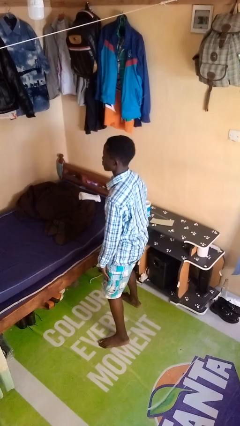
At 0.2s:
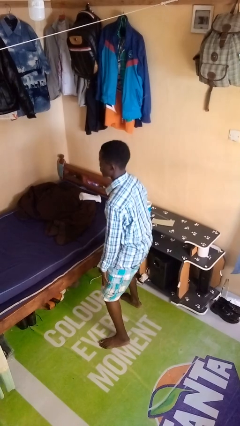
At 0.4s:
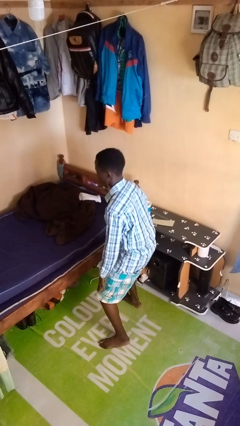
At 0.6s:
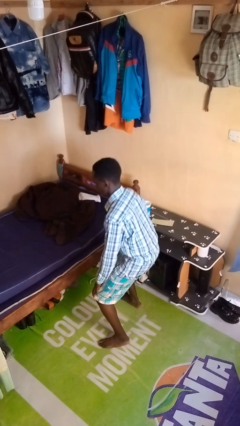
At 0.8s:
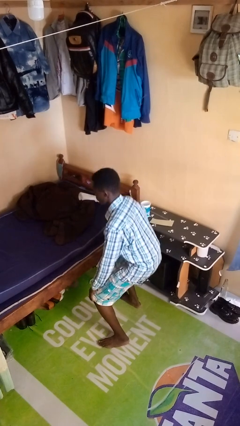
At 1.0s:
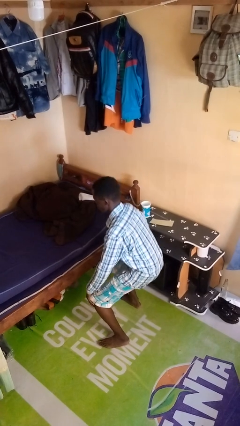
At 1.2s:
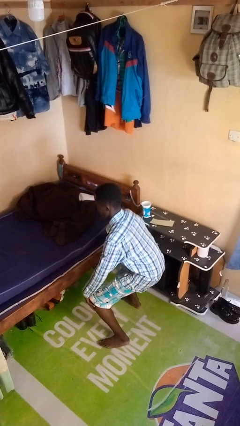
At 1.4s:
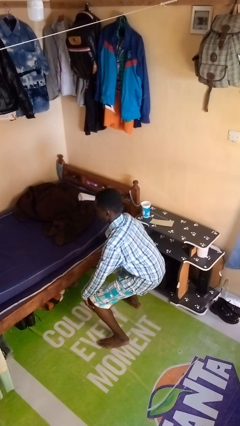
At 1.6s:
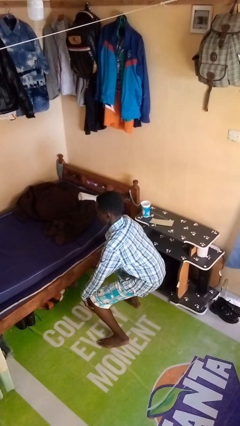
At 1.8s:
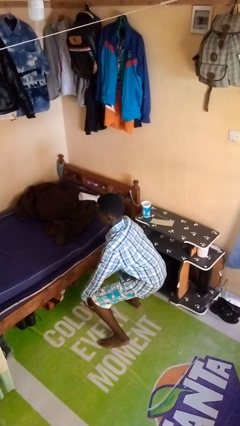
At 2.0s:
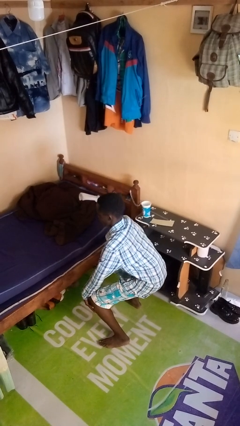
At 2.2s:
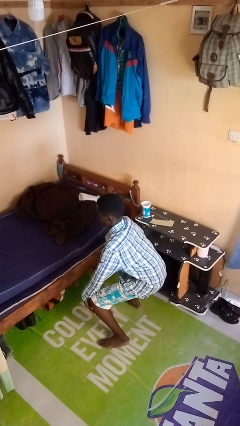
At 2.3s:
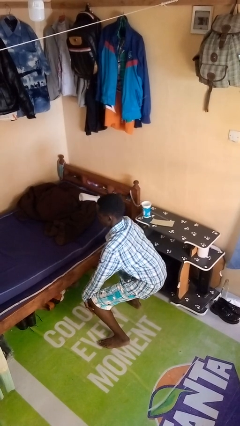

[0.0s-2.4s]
person squats

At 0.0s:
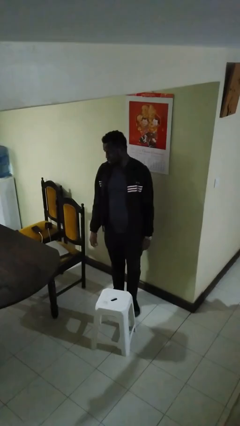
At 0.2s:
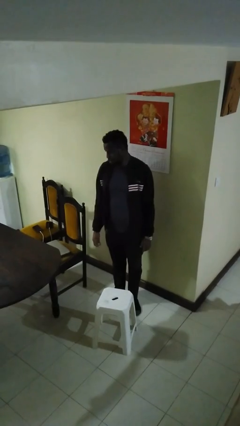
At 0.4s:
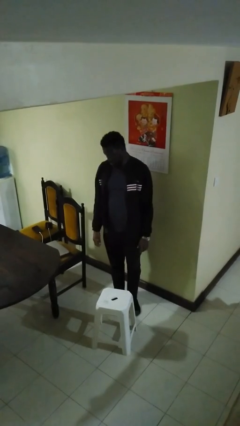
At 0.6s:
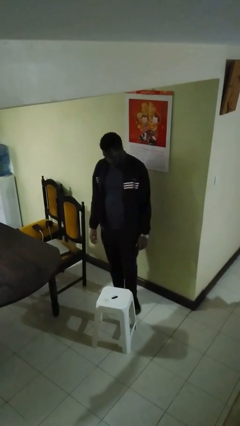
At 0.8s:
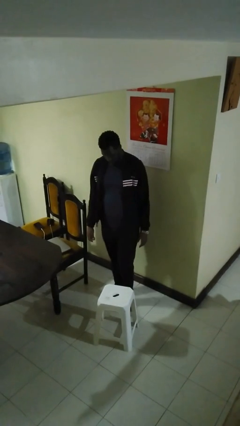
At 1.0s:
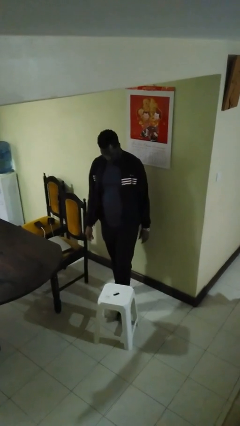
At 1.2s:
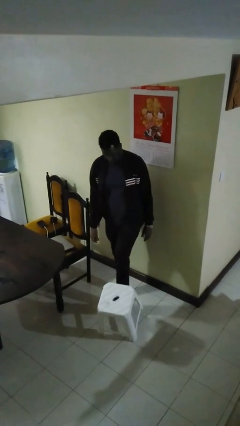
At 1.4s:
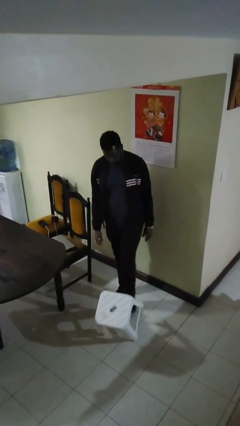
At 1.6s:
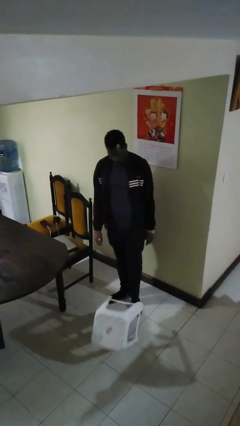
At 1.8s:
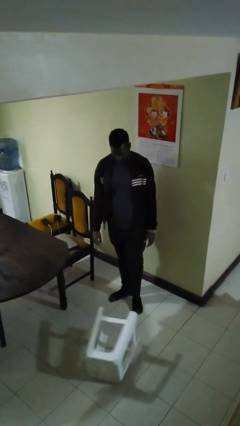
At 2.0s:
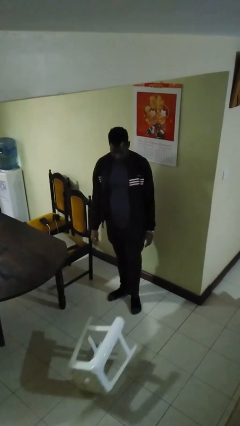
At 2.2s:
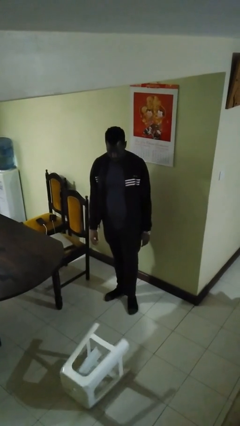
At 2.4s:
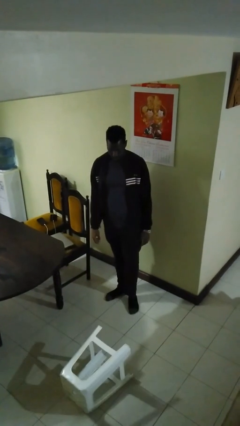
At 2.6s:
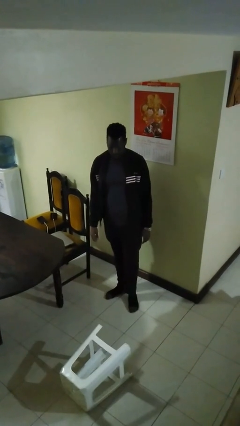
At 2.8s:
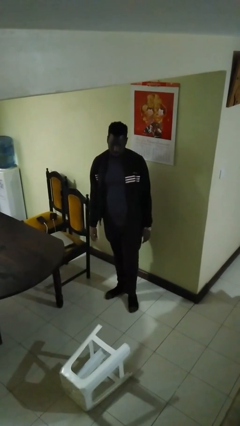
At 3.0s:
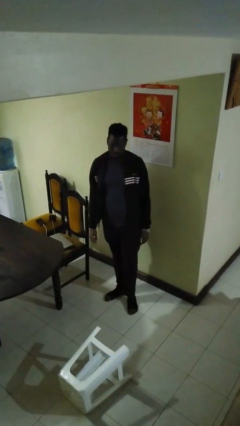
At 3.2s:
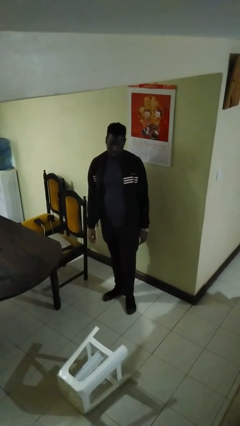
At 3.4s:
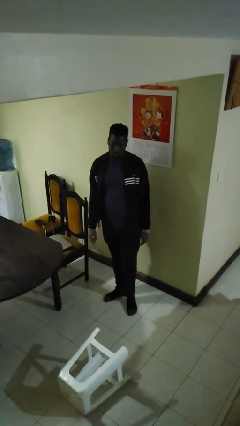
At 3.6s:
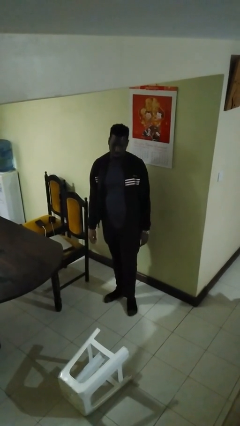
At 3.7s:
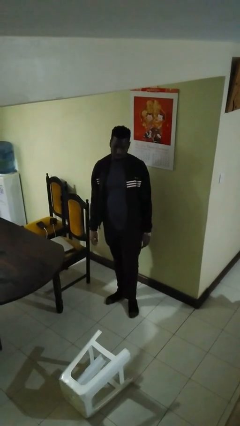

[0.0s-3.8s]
person knocks over furniture

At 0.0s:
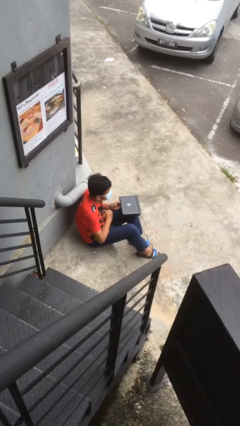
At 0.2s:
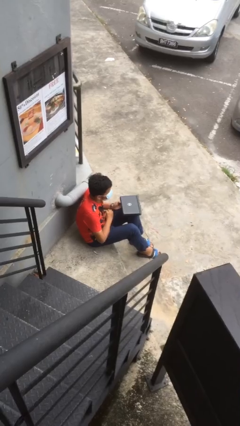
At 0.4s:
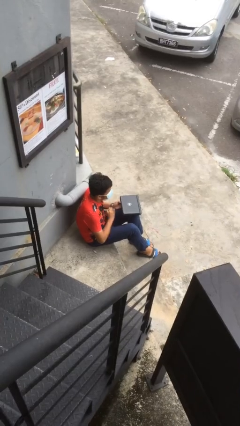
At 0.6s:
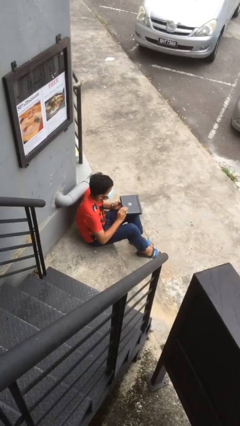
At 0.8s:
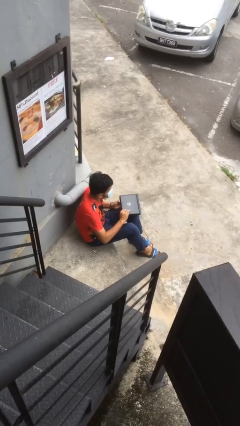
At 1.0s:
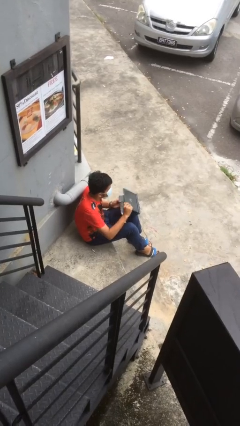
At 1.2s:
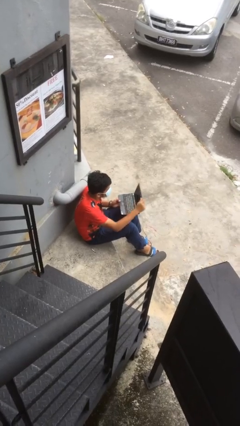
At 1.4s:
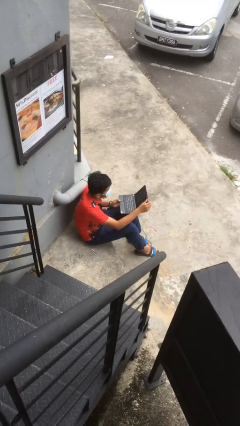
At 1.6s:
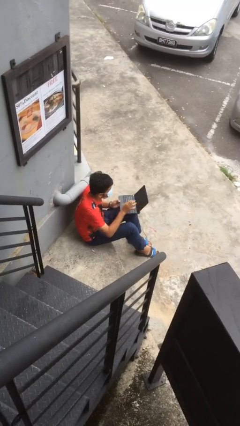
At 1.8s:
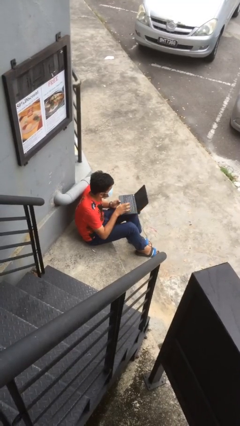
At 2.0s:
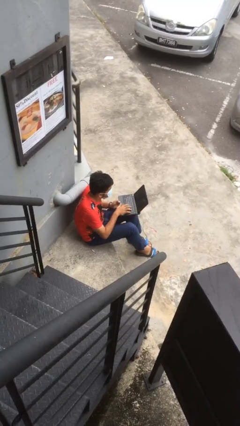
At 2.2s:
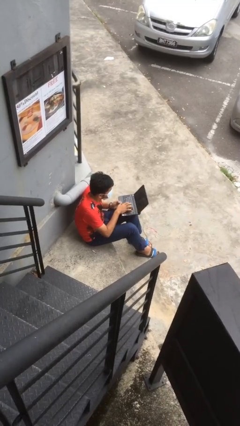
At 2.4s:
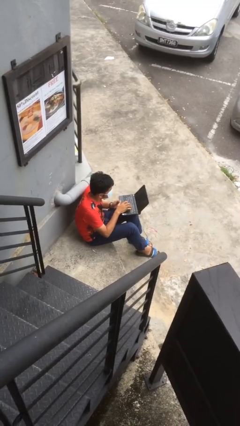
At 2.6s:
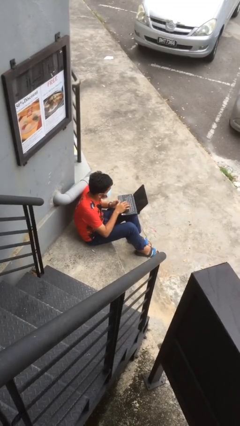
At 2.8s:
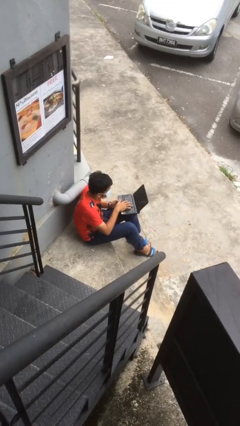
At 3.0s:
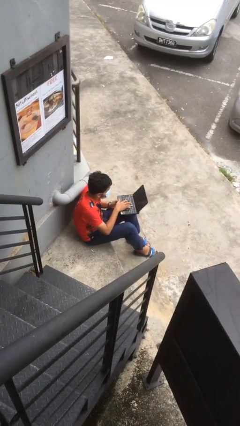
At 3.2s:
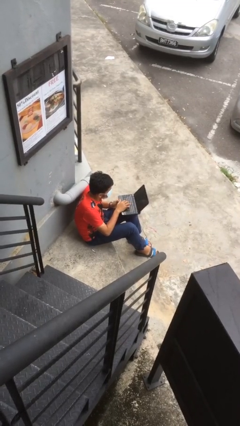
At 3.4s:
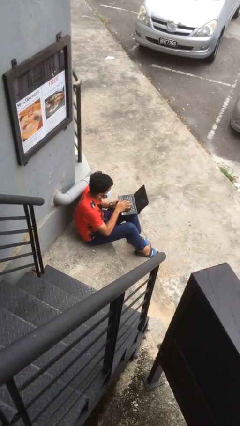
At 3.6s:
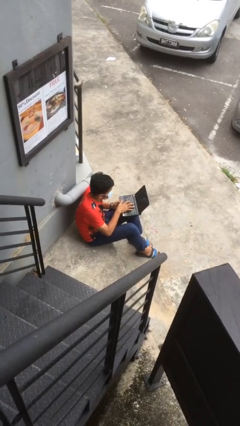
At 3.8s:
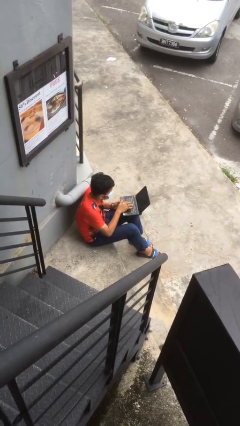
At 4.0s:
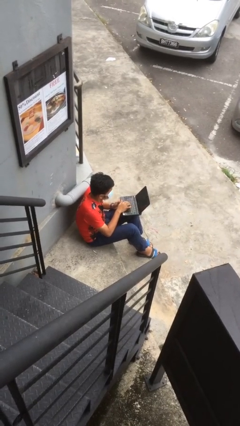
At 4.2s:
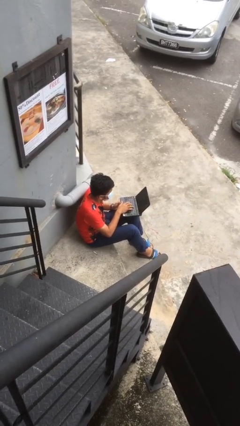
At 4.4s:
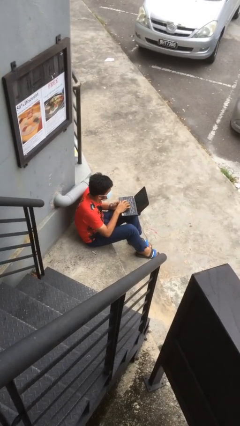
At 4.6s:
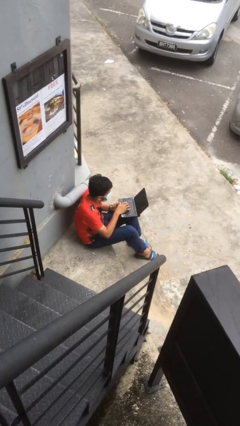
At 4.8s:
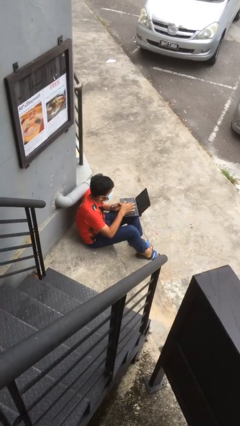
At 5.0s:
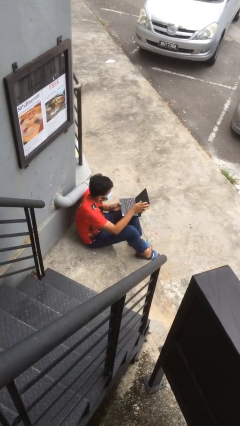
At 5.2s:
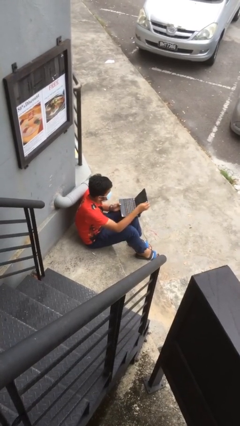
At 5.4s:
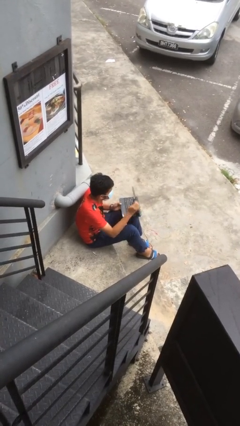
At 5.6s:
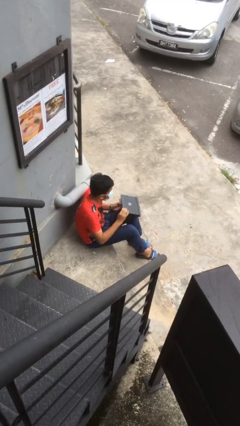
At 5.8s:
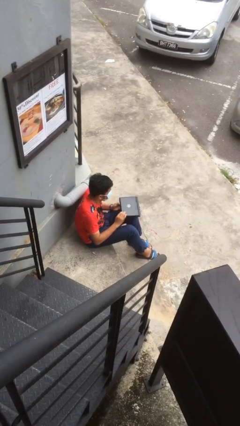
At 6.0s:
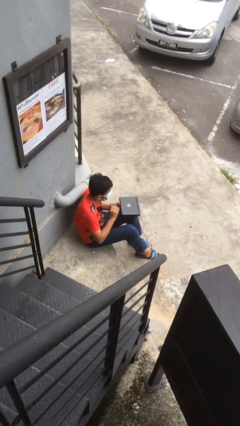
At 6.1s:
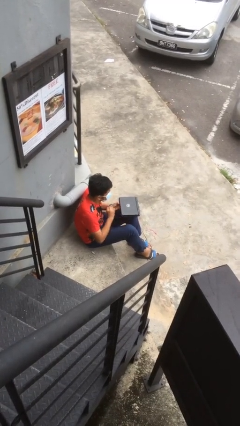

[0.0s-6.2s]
person interacts with laptop

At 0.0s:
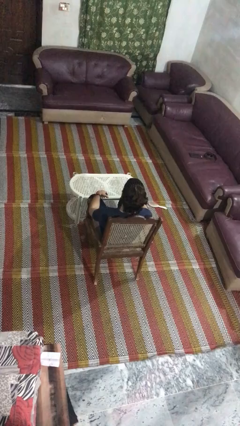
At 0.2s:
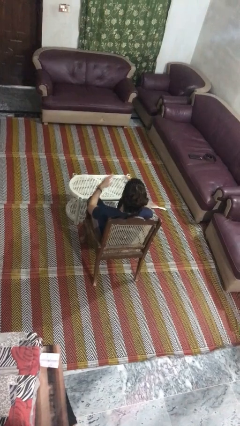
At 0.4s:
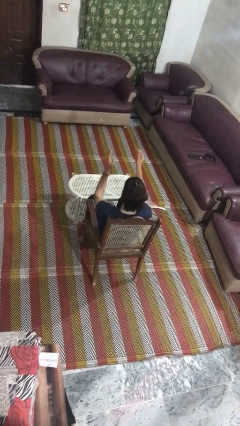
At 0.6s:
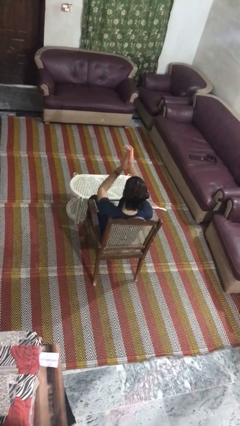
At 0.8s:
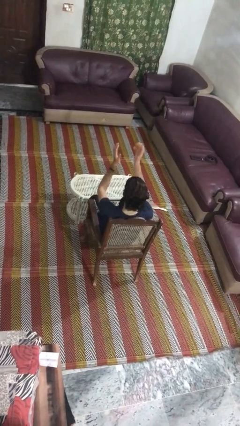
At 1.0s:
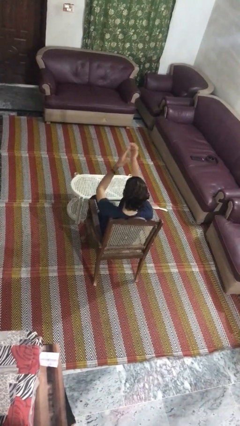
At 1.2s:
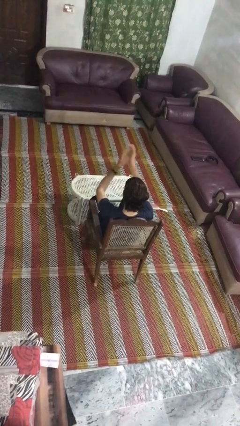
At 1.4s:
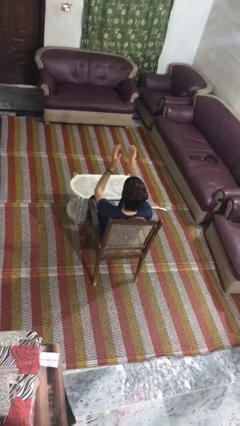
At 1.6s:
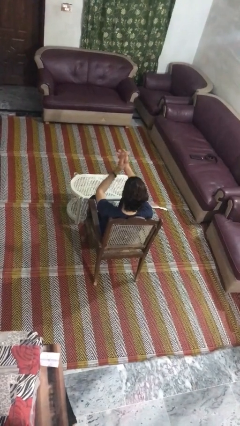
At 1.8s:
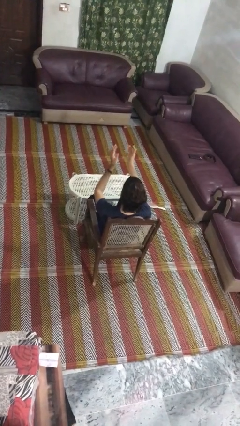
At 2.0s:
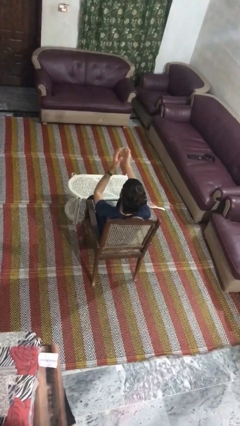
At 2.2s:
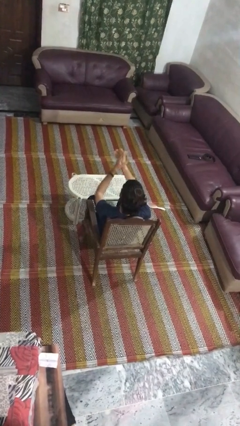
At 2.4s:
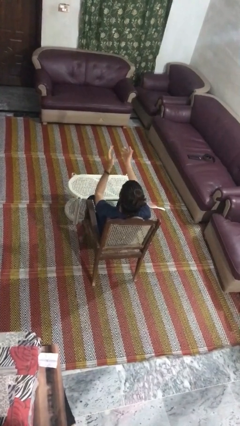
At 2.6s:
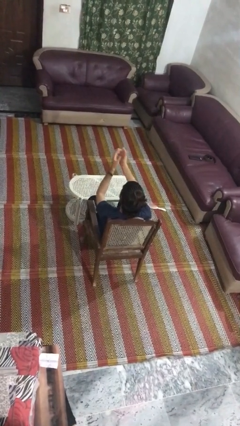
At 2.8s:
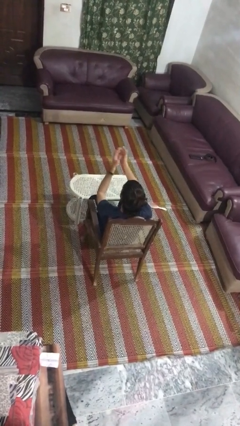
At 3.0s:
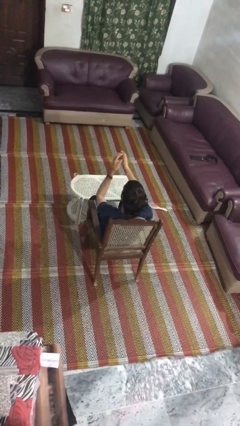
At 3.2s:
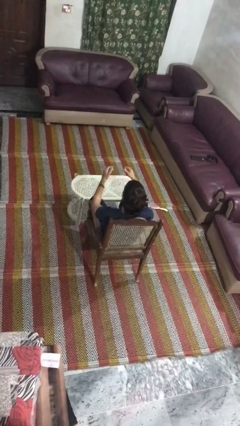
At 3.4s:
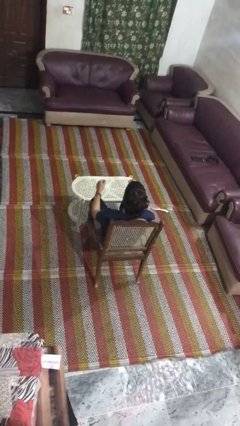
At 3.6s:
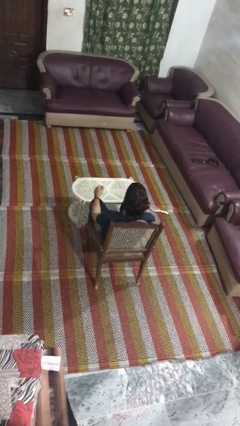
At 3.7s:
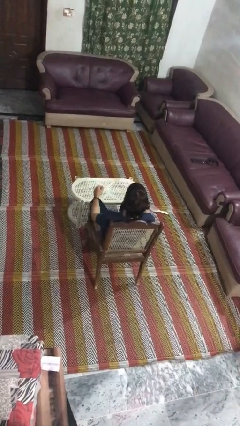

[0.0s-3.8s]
person claps hands

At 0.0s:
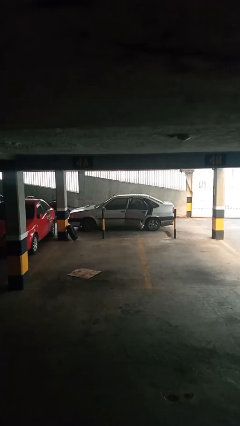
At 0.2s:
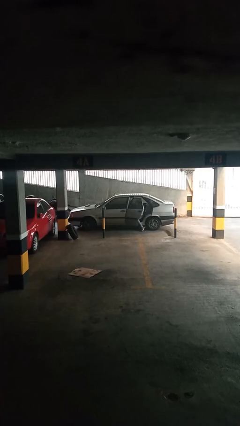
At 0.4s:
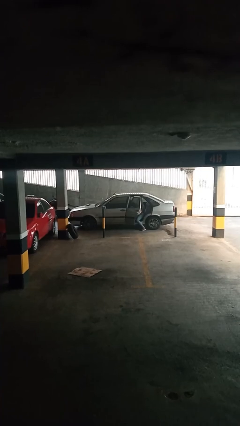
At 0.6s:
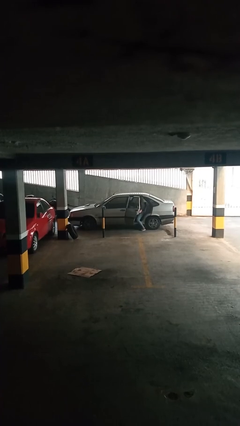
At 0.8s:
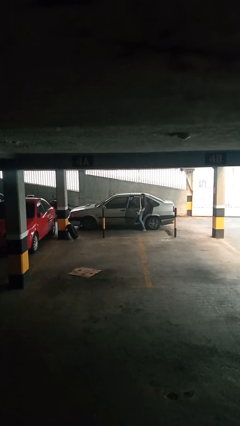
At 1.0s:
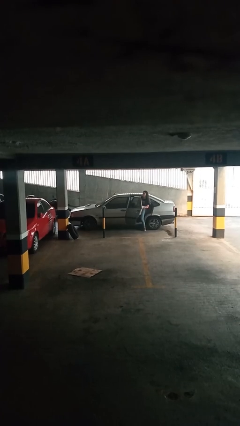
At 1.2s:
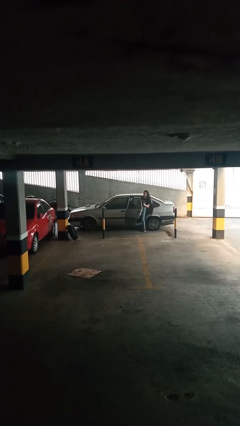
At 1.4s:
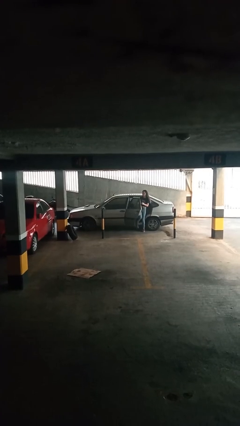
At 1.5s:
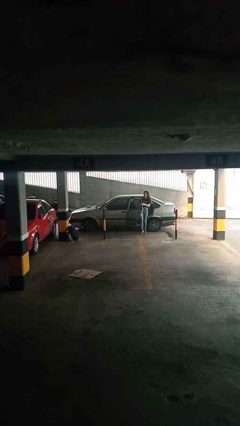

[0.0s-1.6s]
car drops off person
